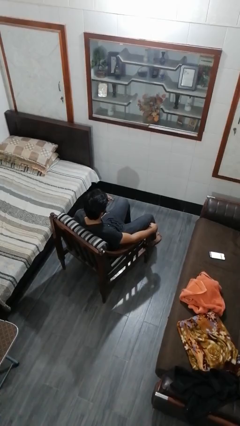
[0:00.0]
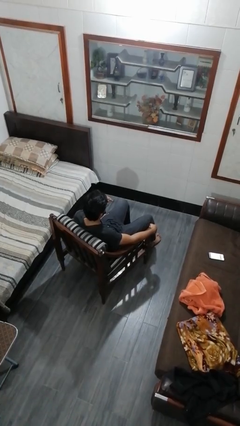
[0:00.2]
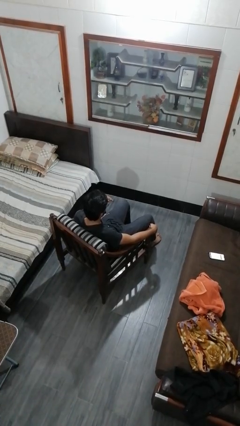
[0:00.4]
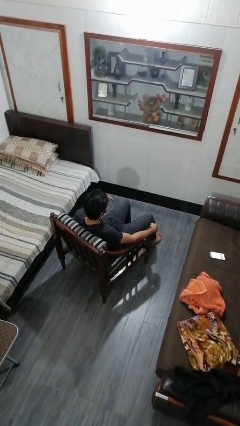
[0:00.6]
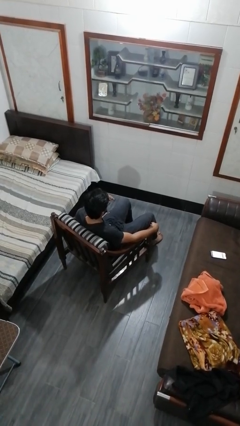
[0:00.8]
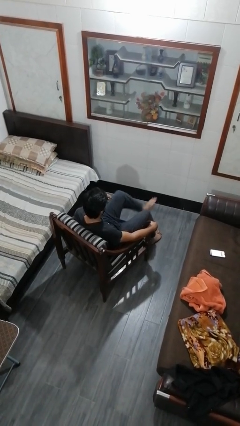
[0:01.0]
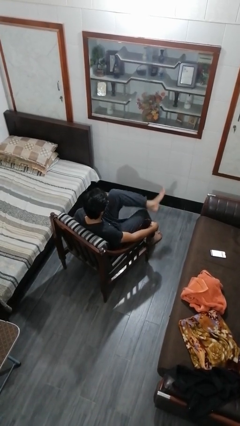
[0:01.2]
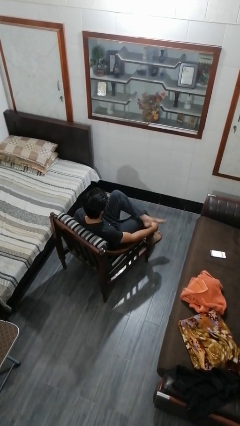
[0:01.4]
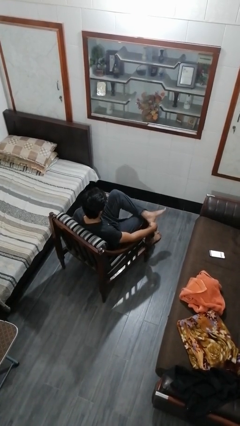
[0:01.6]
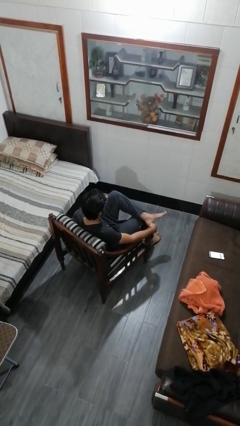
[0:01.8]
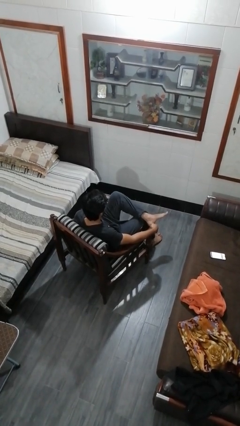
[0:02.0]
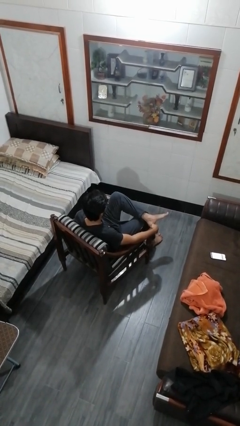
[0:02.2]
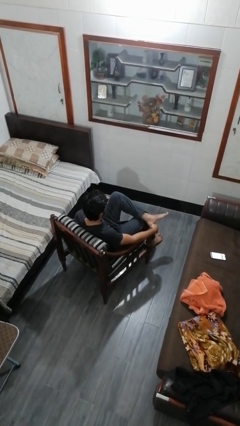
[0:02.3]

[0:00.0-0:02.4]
person crosses legs

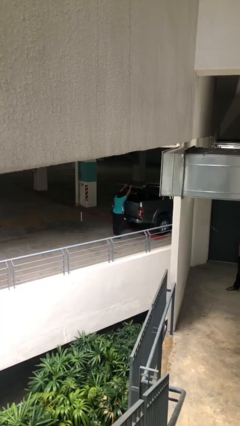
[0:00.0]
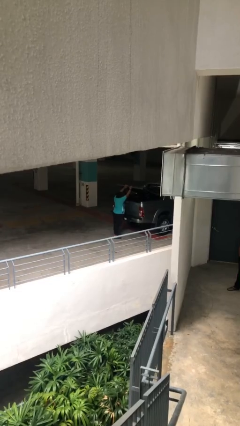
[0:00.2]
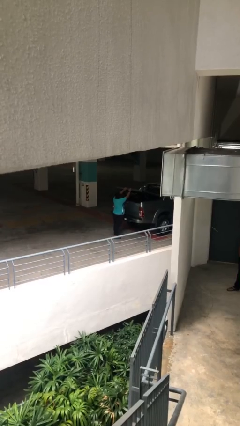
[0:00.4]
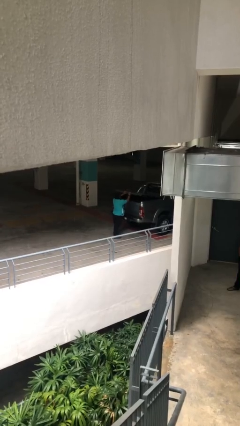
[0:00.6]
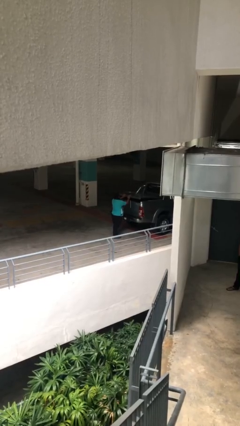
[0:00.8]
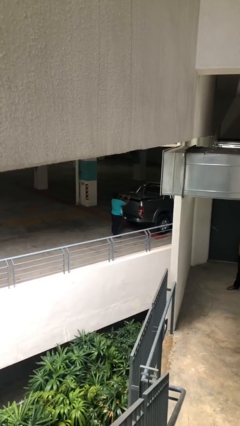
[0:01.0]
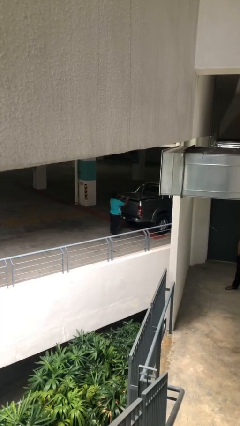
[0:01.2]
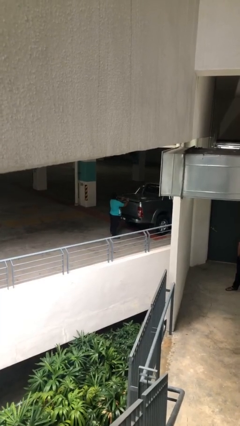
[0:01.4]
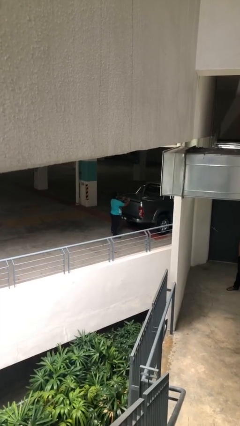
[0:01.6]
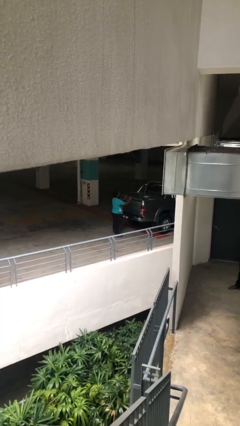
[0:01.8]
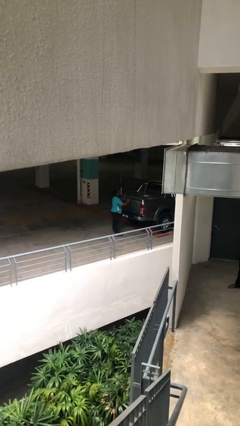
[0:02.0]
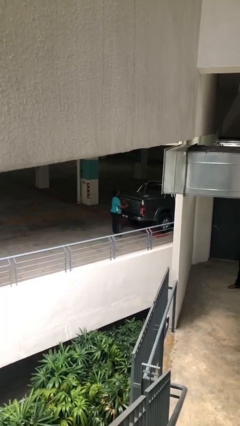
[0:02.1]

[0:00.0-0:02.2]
person closes car trunk

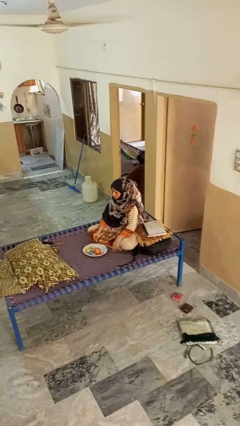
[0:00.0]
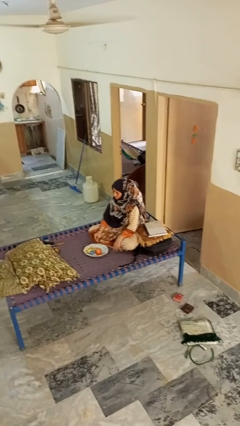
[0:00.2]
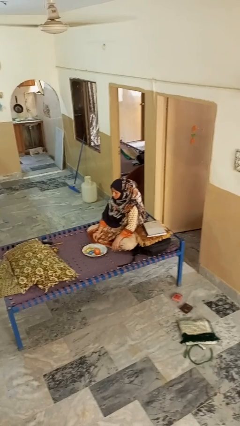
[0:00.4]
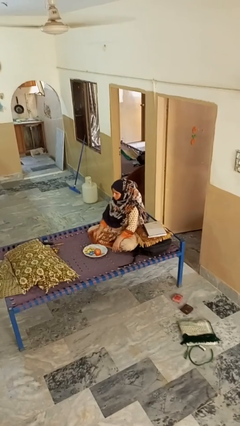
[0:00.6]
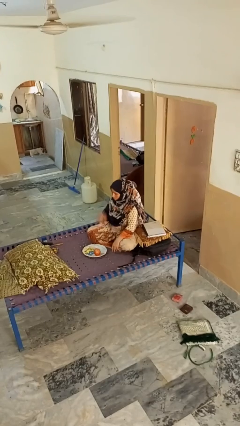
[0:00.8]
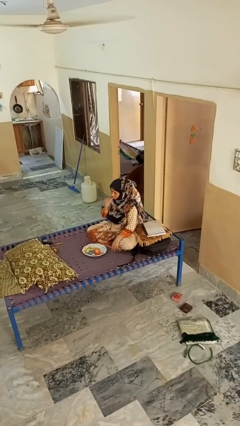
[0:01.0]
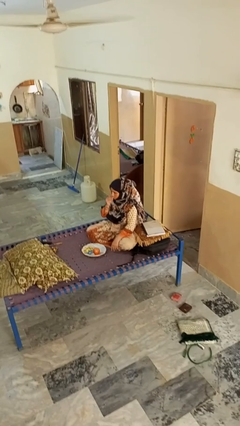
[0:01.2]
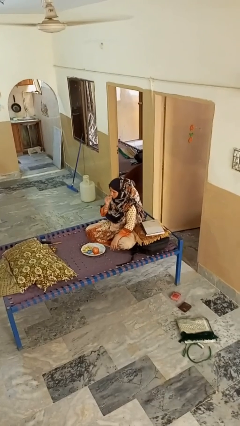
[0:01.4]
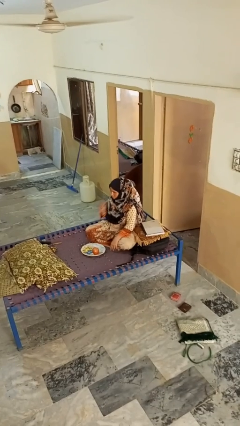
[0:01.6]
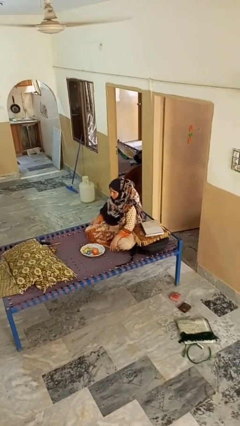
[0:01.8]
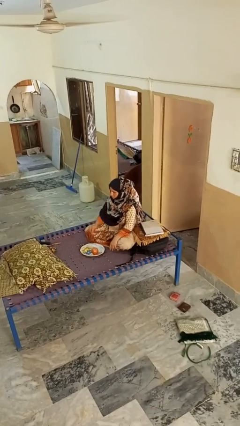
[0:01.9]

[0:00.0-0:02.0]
person eats apple

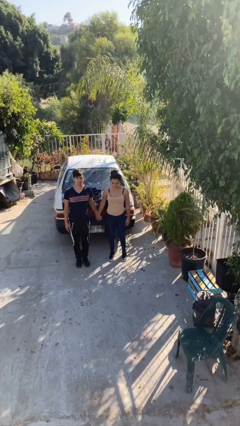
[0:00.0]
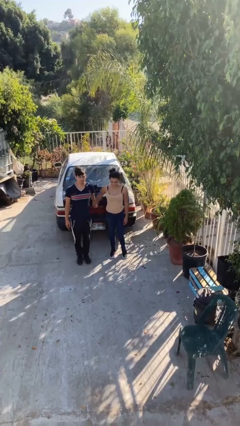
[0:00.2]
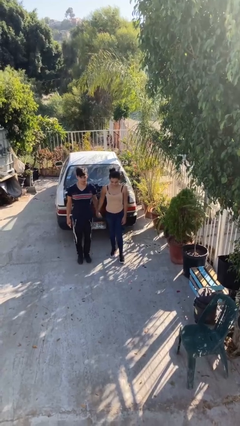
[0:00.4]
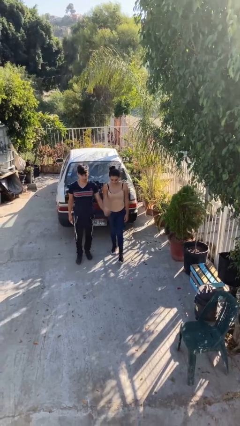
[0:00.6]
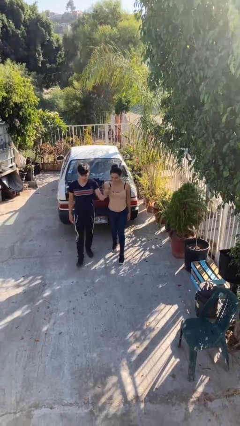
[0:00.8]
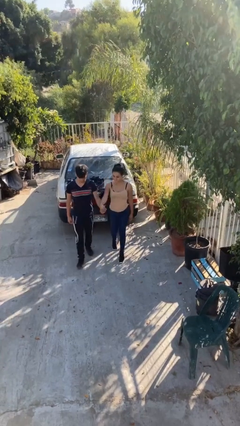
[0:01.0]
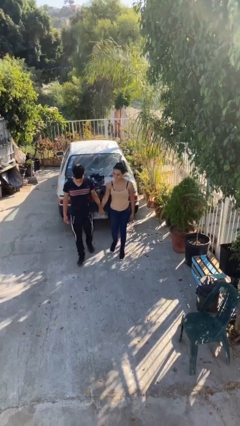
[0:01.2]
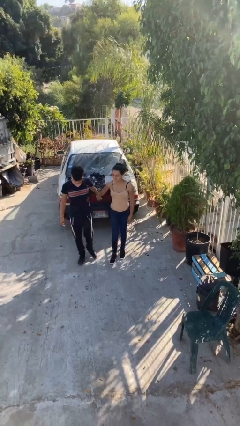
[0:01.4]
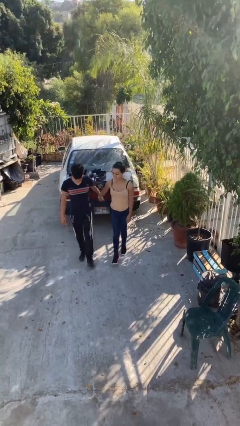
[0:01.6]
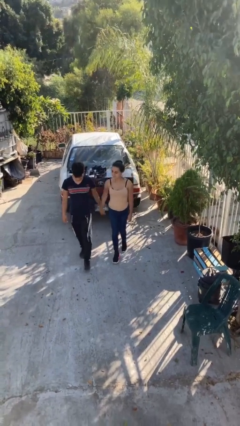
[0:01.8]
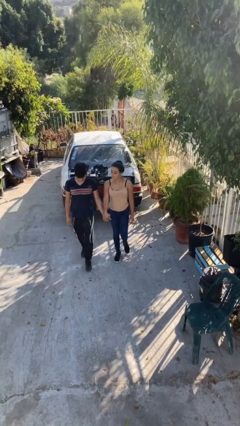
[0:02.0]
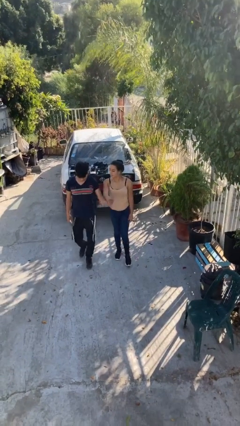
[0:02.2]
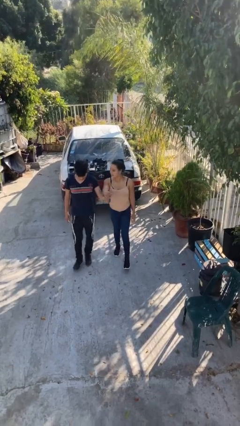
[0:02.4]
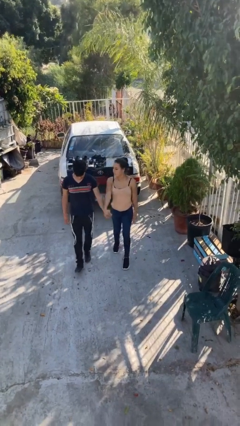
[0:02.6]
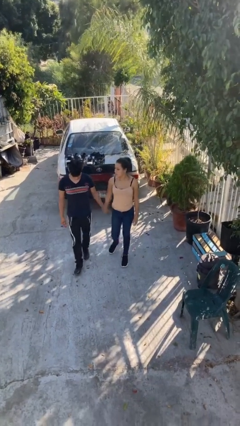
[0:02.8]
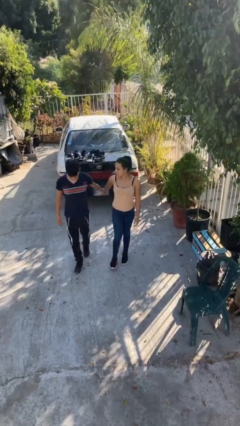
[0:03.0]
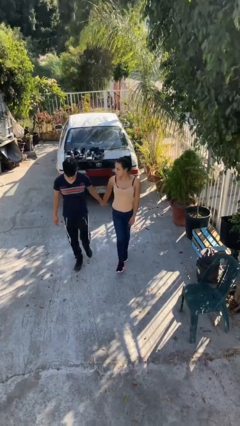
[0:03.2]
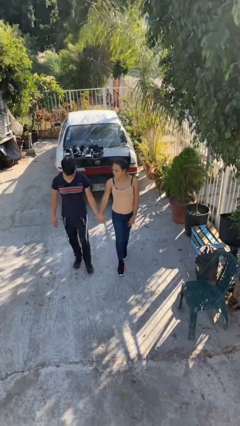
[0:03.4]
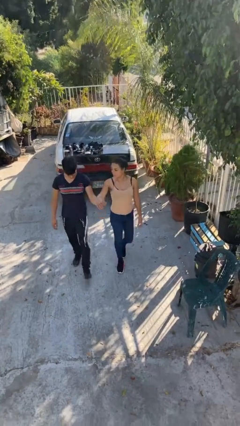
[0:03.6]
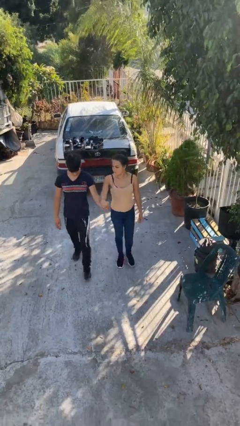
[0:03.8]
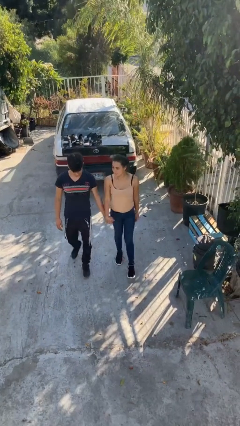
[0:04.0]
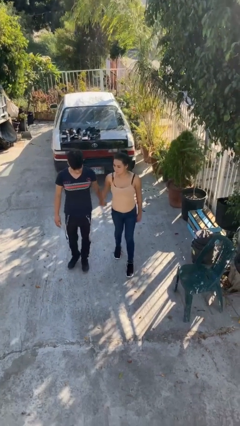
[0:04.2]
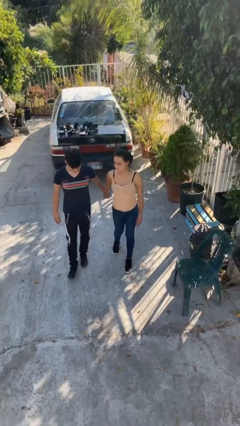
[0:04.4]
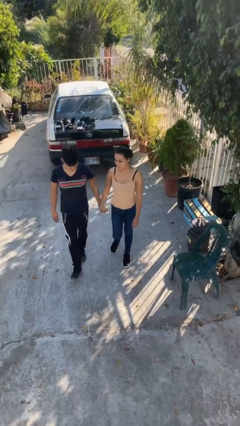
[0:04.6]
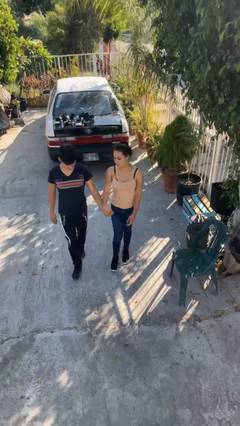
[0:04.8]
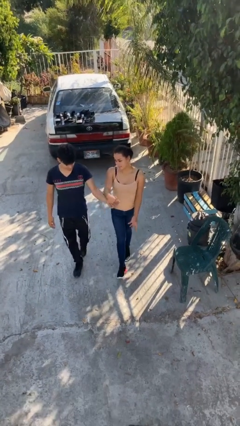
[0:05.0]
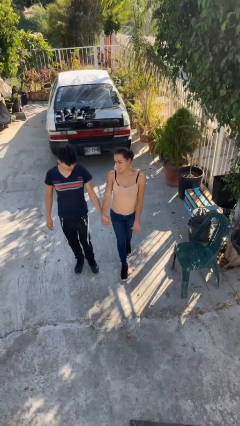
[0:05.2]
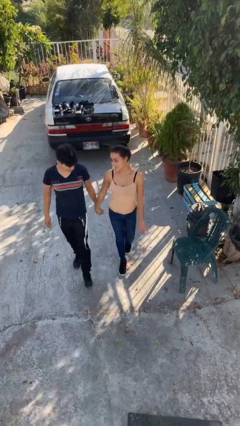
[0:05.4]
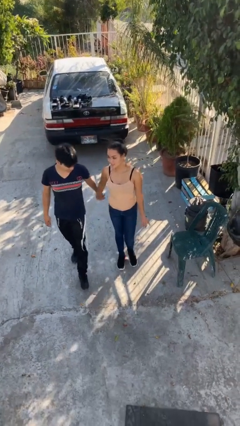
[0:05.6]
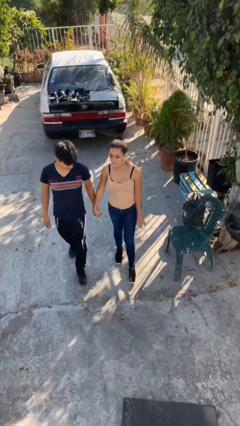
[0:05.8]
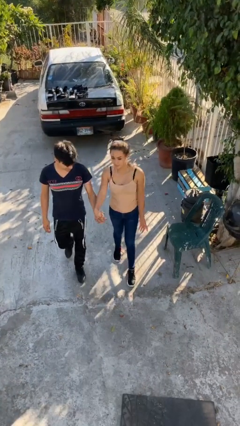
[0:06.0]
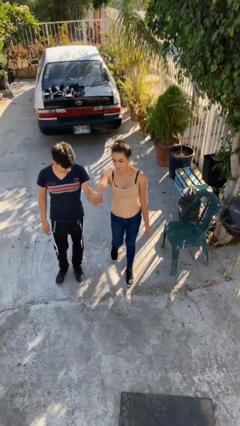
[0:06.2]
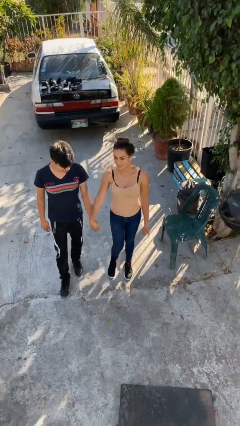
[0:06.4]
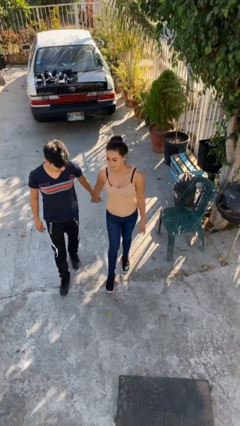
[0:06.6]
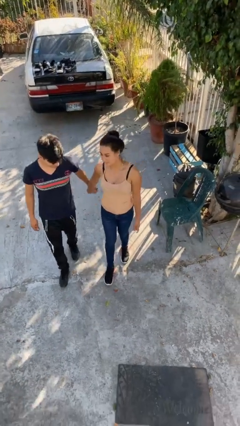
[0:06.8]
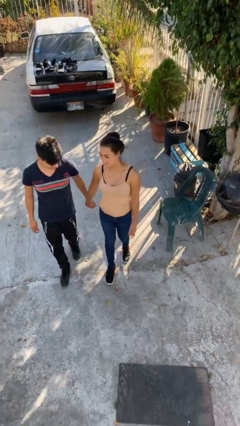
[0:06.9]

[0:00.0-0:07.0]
person holds hand

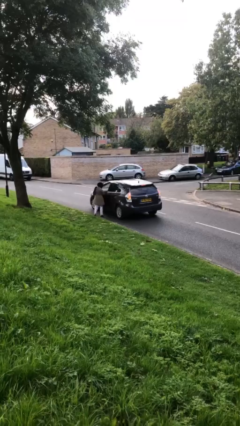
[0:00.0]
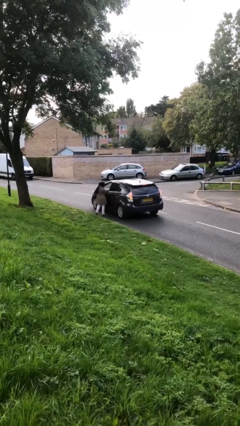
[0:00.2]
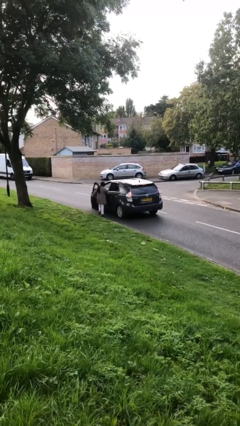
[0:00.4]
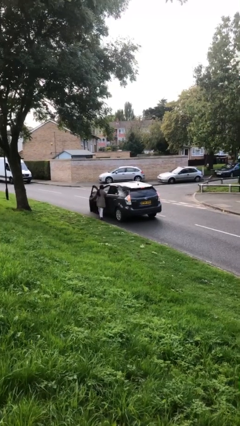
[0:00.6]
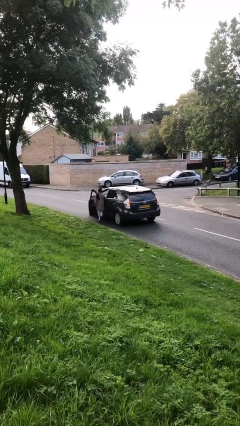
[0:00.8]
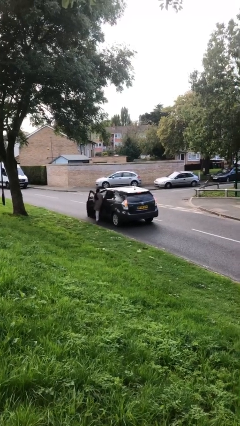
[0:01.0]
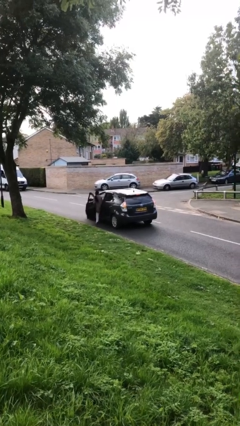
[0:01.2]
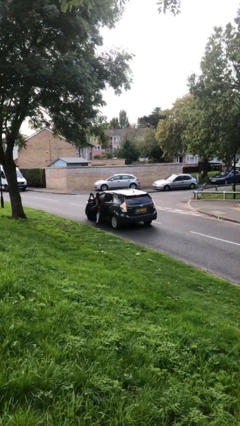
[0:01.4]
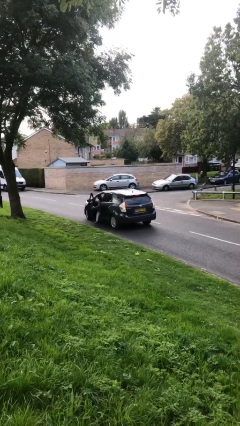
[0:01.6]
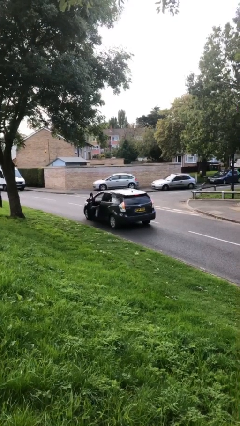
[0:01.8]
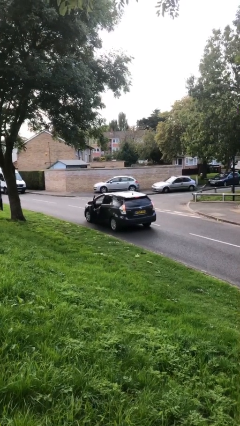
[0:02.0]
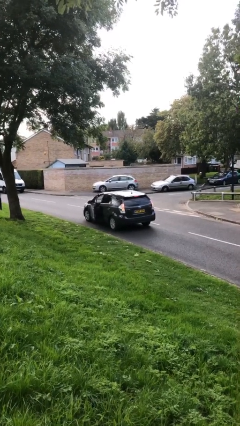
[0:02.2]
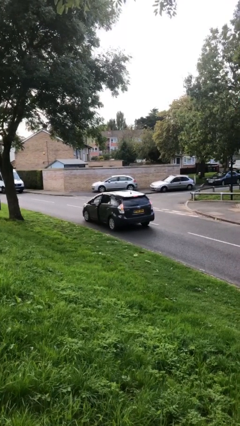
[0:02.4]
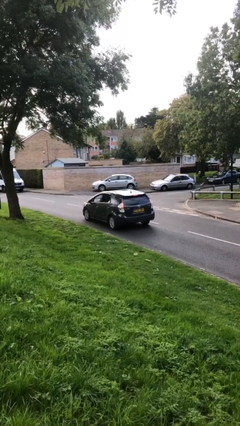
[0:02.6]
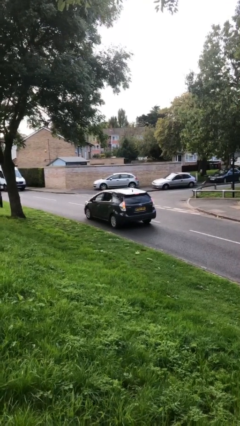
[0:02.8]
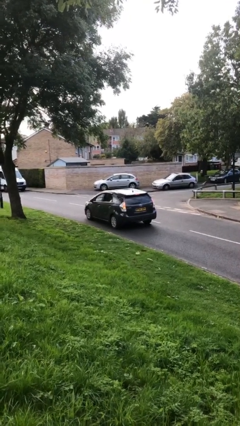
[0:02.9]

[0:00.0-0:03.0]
car picks up person

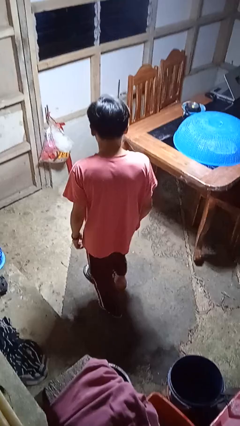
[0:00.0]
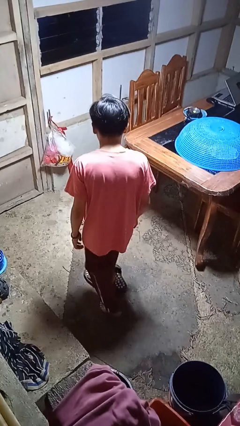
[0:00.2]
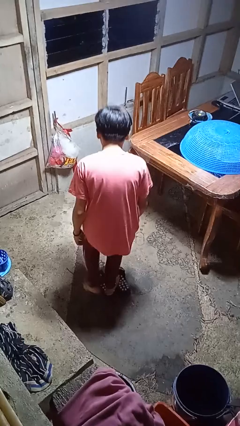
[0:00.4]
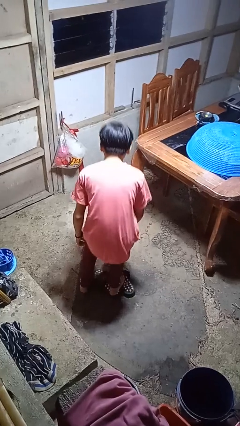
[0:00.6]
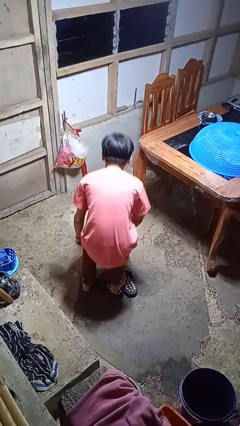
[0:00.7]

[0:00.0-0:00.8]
person trips on object on floor
